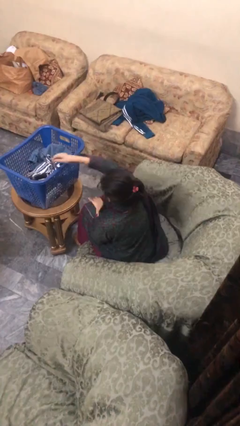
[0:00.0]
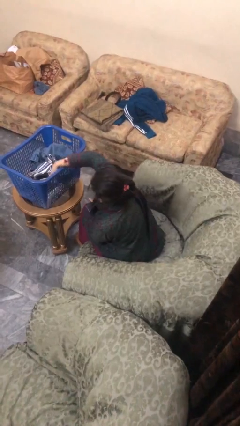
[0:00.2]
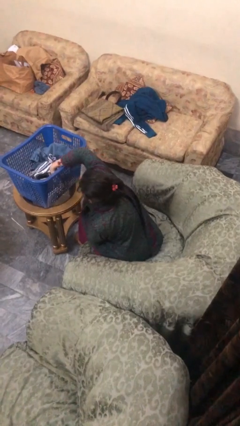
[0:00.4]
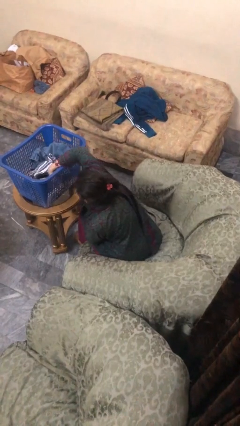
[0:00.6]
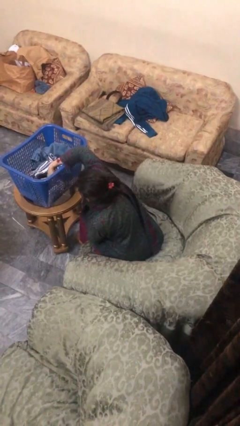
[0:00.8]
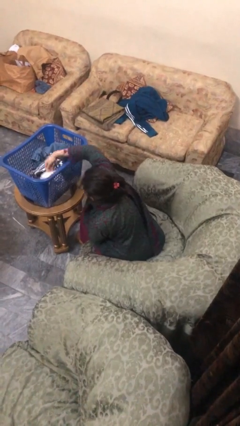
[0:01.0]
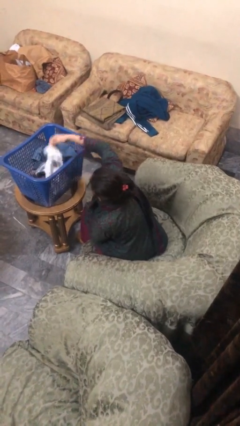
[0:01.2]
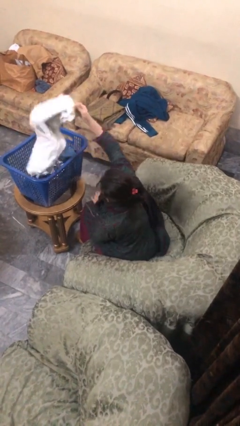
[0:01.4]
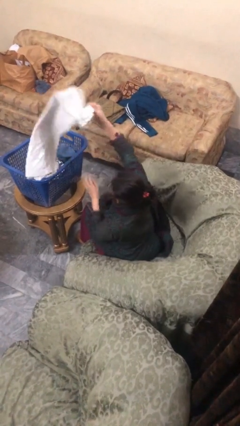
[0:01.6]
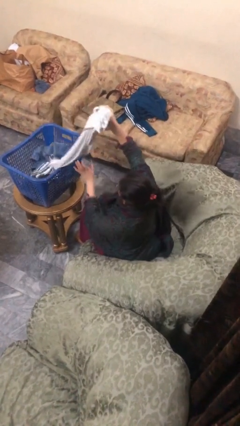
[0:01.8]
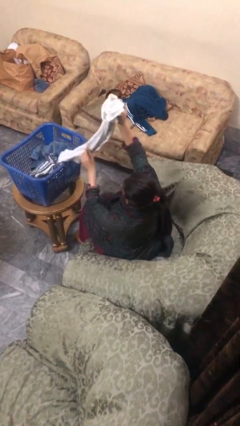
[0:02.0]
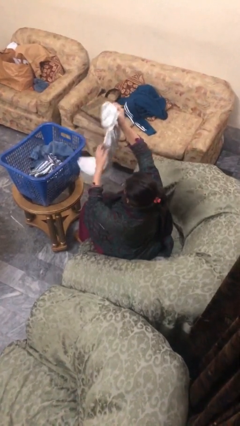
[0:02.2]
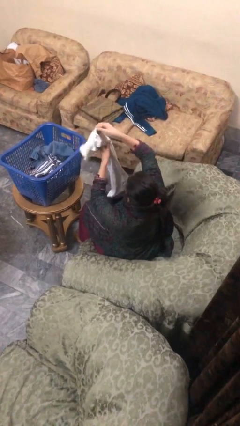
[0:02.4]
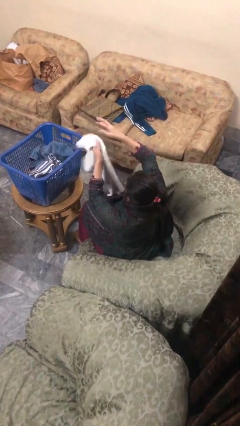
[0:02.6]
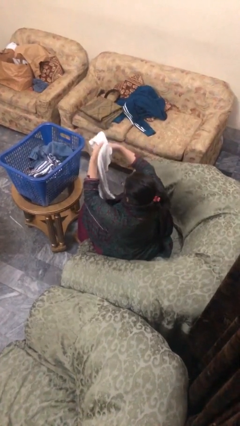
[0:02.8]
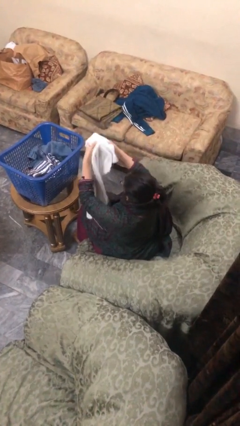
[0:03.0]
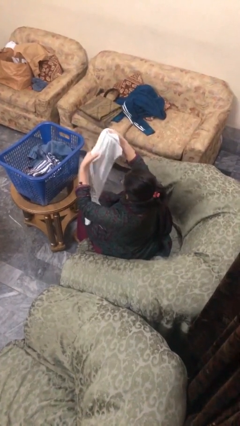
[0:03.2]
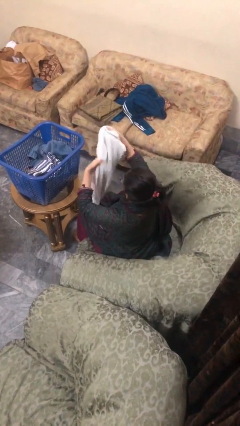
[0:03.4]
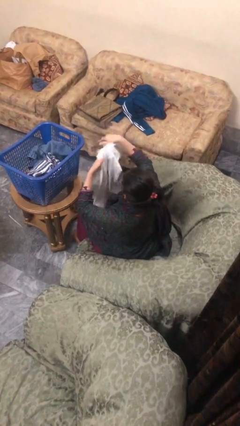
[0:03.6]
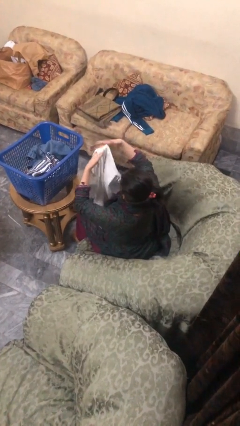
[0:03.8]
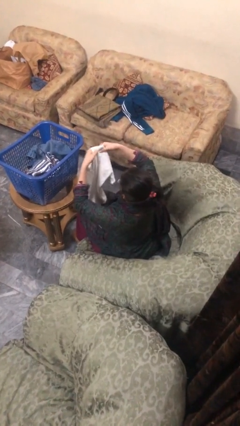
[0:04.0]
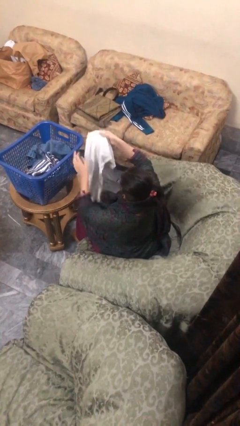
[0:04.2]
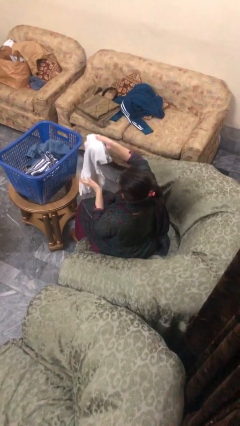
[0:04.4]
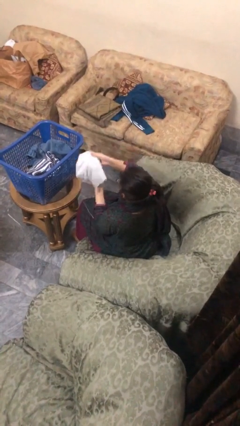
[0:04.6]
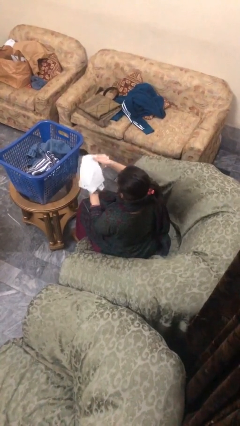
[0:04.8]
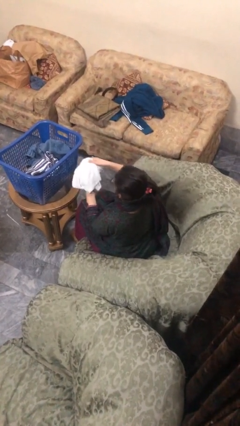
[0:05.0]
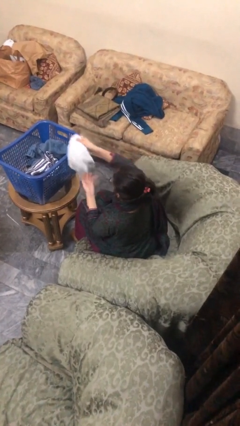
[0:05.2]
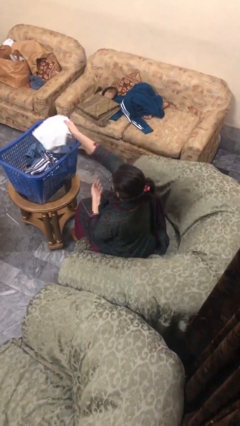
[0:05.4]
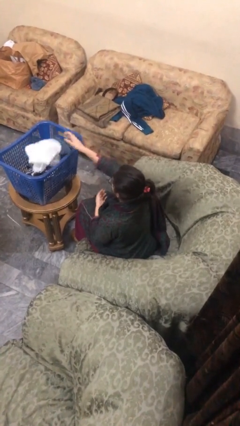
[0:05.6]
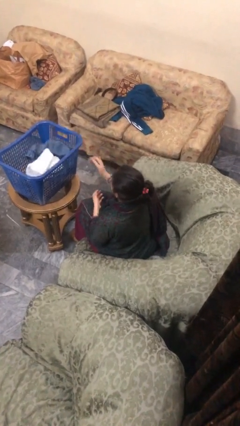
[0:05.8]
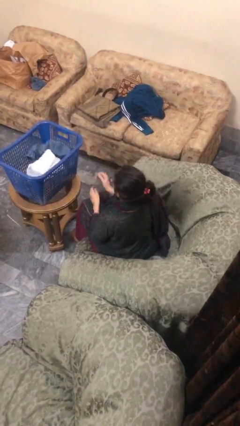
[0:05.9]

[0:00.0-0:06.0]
person folds shirt

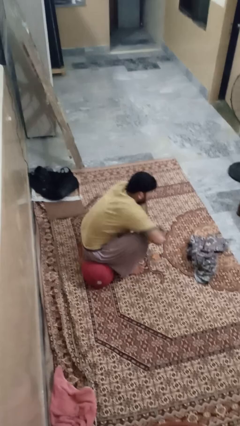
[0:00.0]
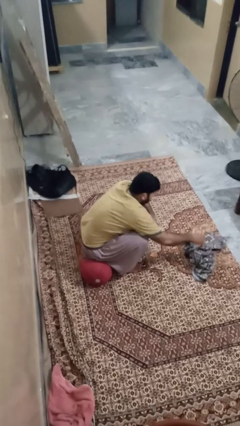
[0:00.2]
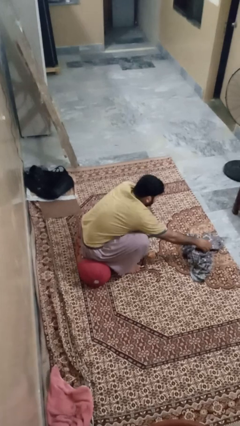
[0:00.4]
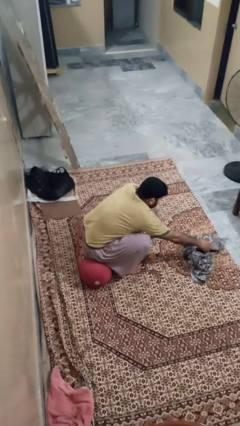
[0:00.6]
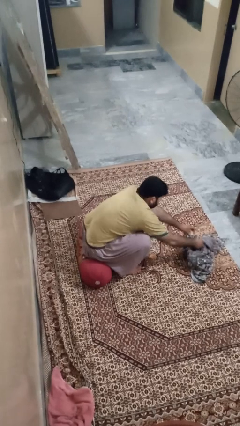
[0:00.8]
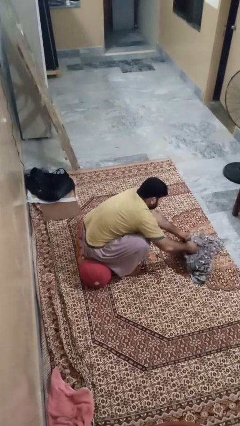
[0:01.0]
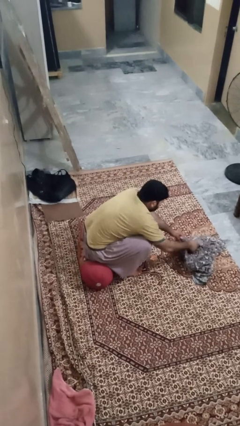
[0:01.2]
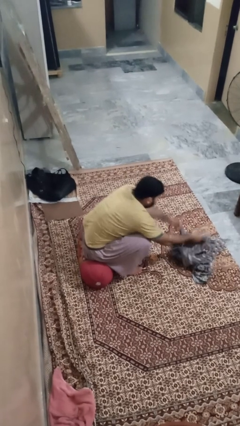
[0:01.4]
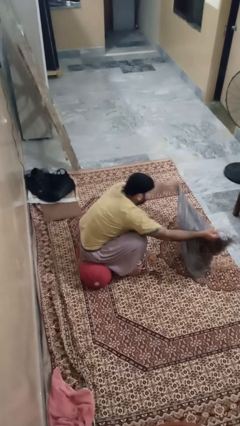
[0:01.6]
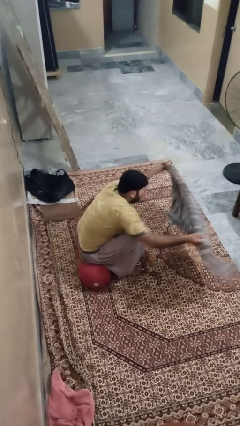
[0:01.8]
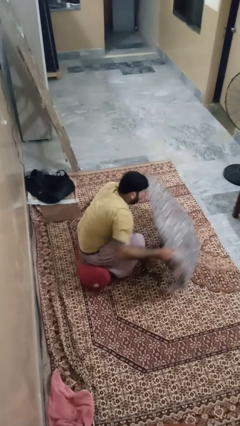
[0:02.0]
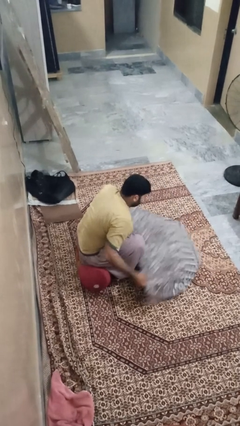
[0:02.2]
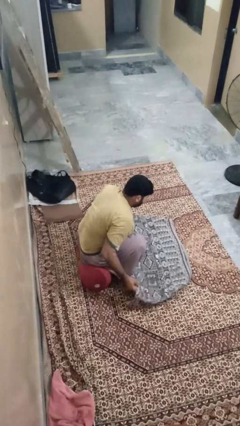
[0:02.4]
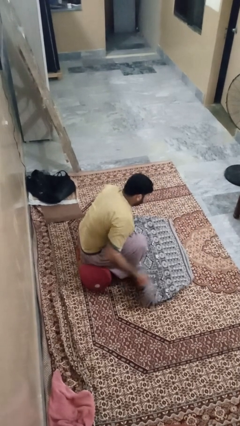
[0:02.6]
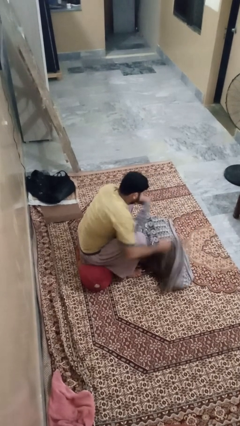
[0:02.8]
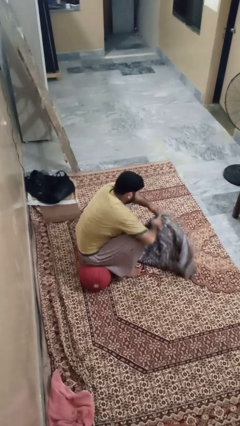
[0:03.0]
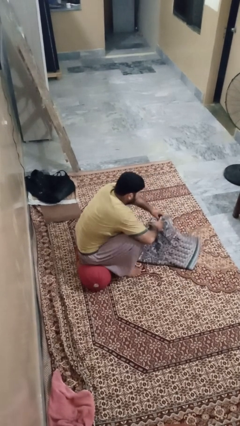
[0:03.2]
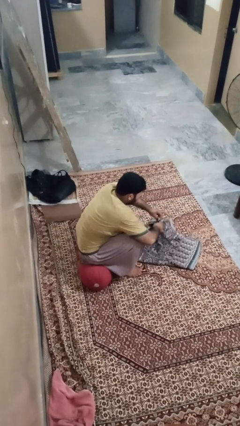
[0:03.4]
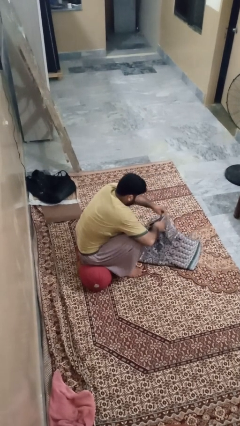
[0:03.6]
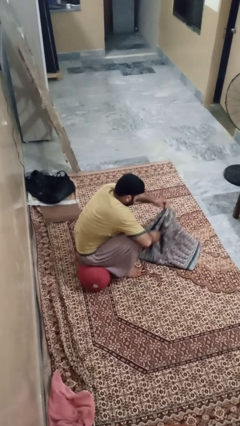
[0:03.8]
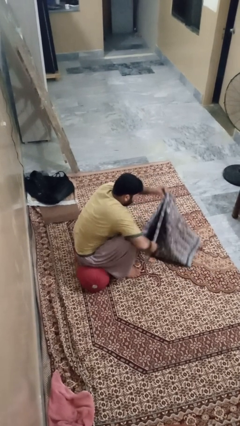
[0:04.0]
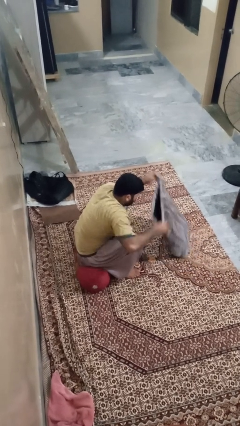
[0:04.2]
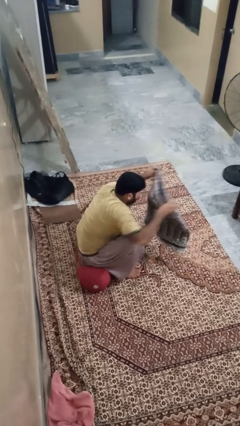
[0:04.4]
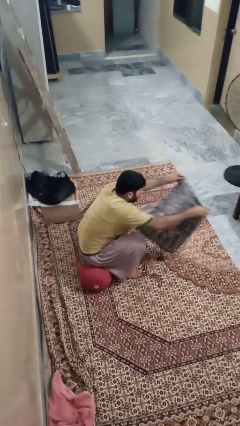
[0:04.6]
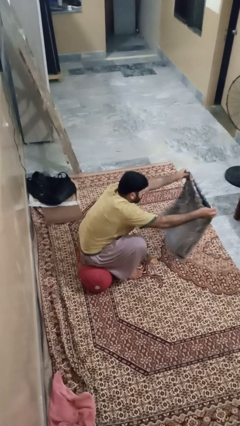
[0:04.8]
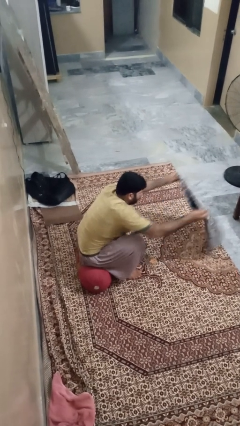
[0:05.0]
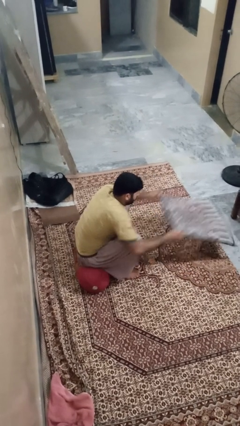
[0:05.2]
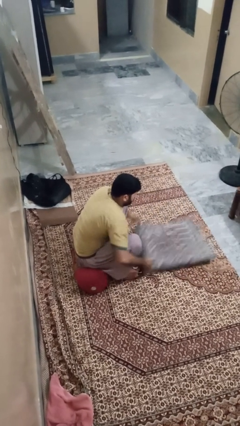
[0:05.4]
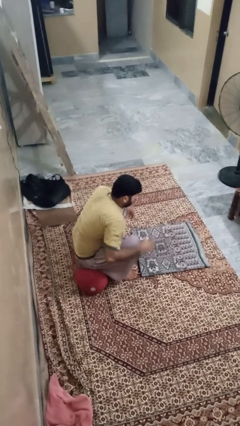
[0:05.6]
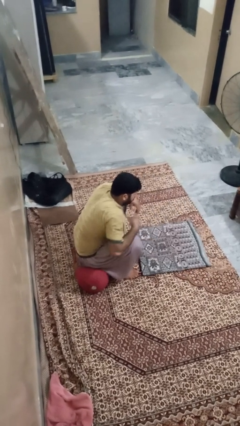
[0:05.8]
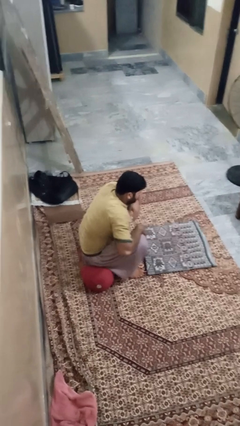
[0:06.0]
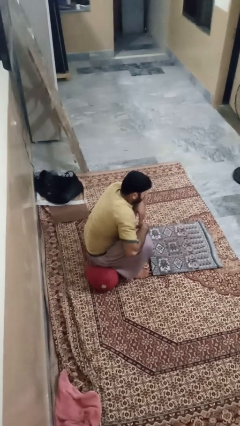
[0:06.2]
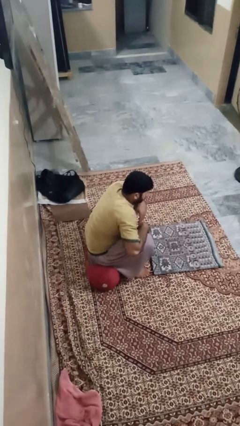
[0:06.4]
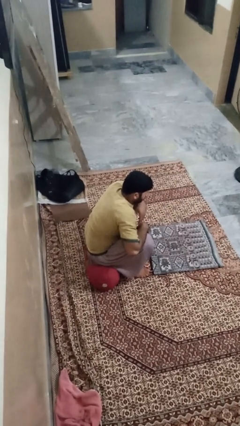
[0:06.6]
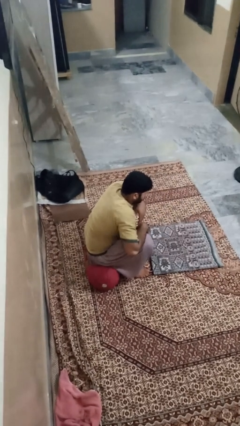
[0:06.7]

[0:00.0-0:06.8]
person folds blanket

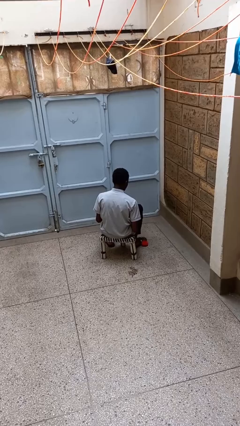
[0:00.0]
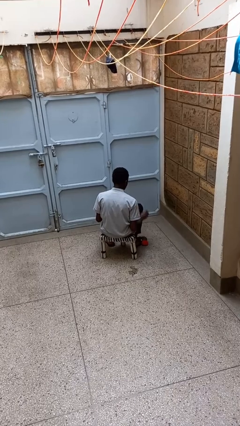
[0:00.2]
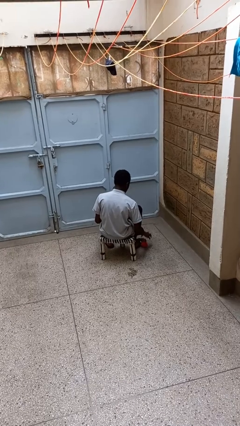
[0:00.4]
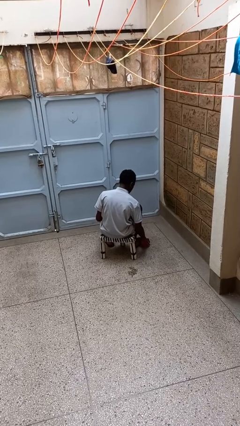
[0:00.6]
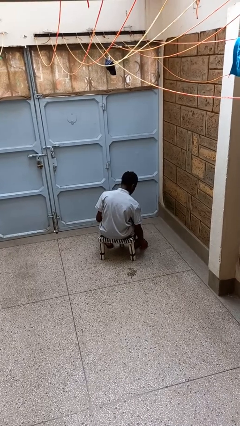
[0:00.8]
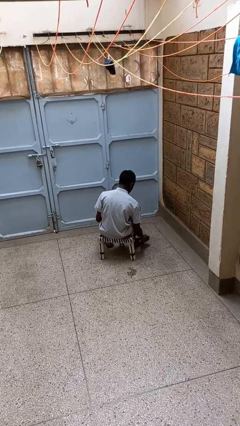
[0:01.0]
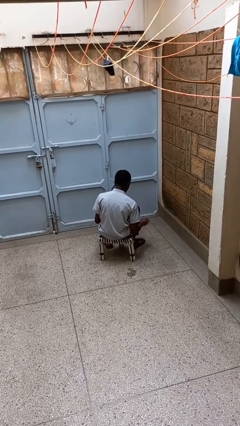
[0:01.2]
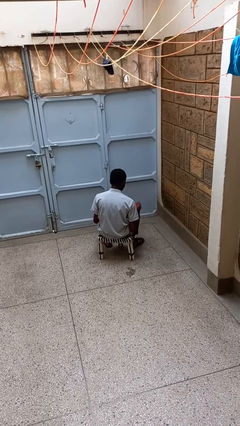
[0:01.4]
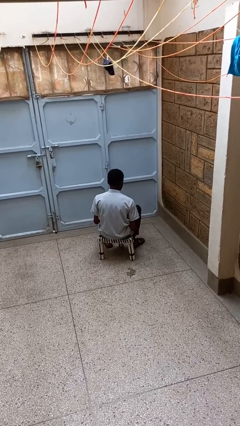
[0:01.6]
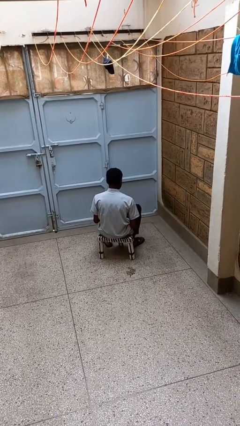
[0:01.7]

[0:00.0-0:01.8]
person picks up object from floor

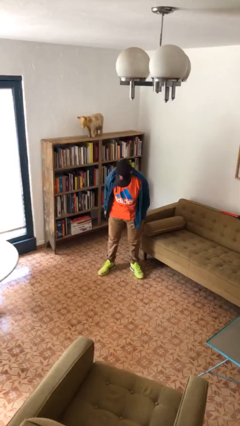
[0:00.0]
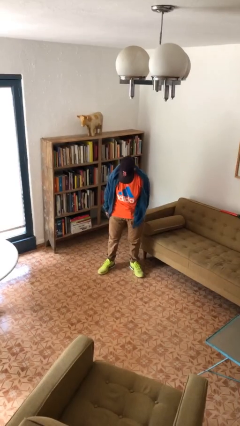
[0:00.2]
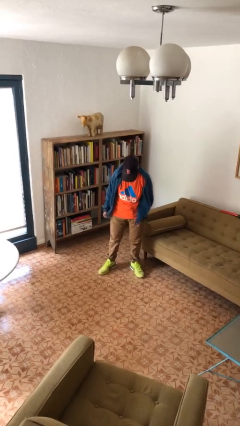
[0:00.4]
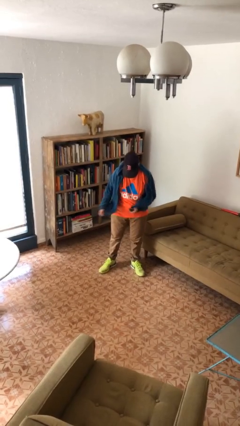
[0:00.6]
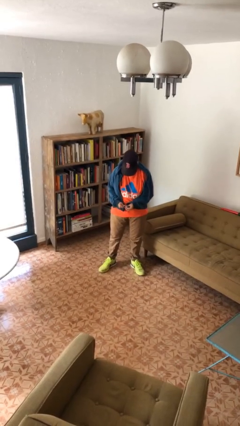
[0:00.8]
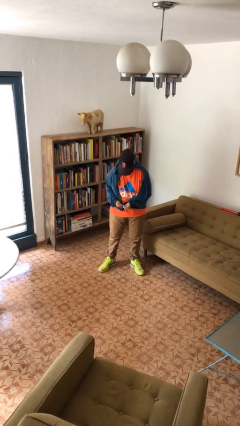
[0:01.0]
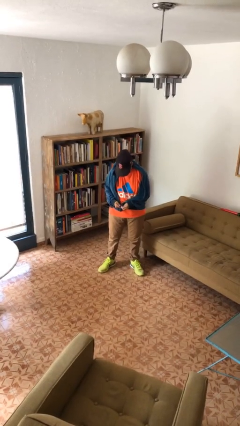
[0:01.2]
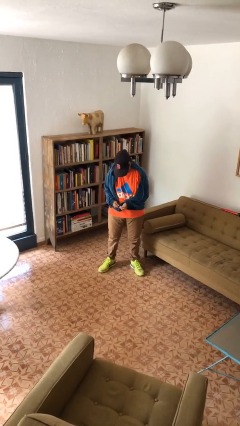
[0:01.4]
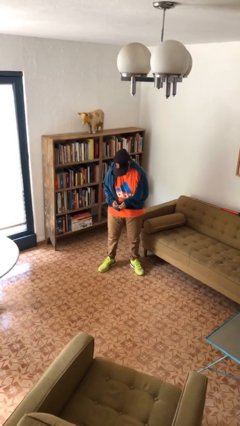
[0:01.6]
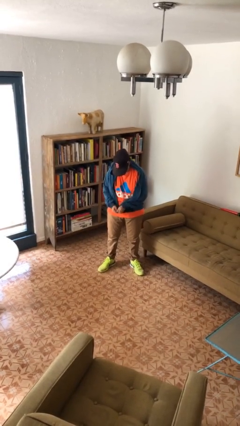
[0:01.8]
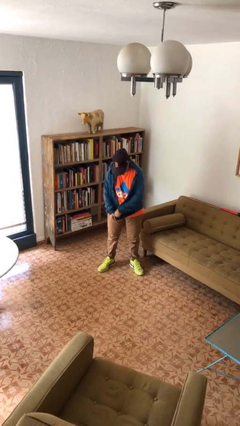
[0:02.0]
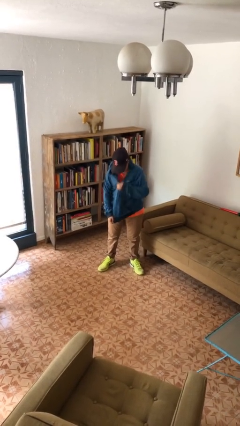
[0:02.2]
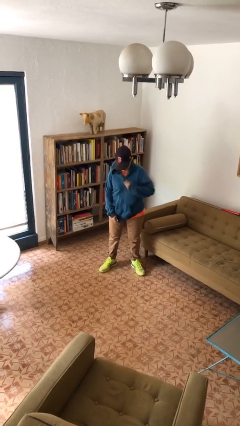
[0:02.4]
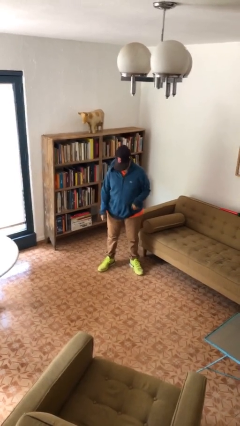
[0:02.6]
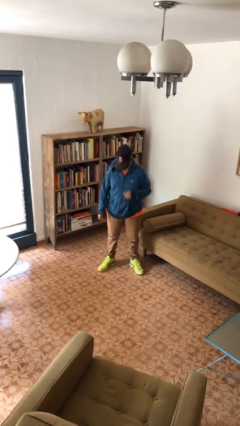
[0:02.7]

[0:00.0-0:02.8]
person zips up jacket

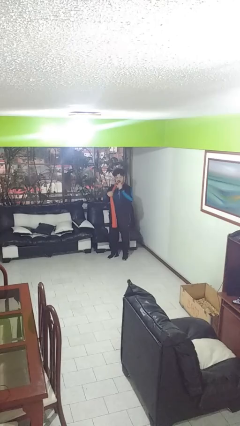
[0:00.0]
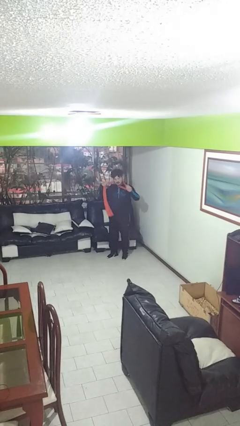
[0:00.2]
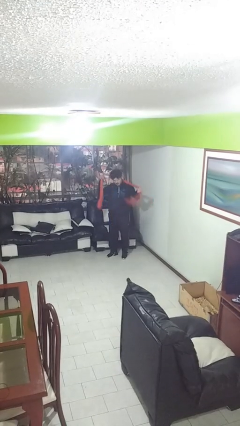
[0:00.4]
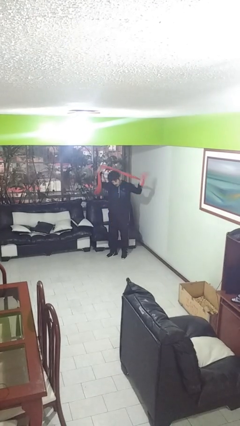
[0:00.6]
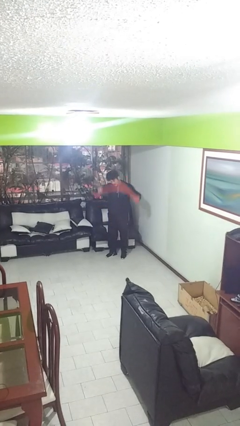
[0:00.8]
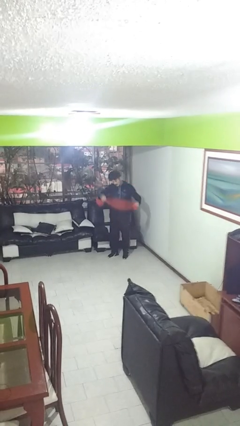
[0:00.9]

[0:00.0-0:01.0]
person takes off scarf
